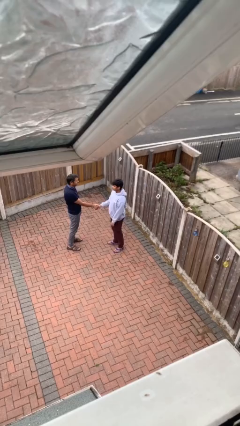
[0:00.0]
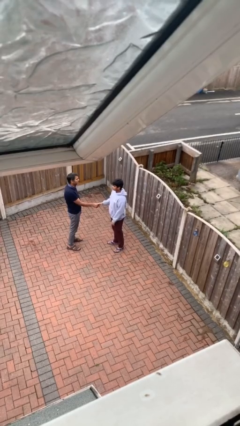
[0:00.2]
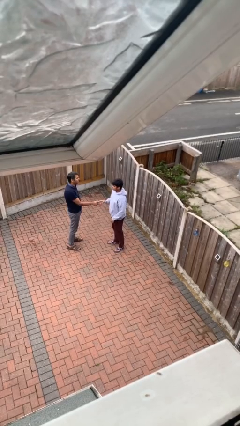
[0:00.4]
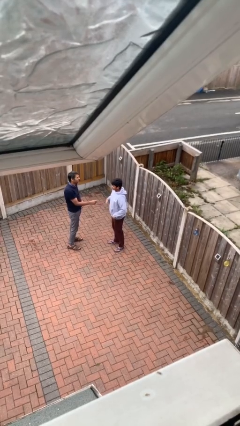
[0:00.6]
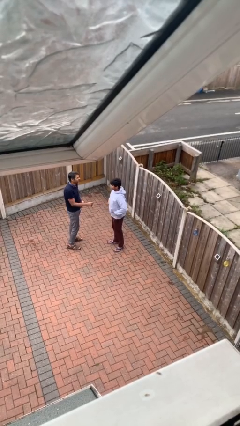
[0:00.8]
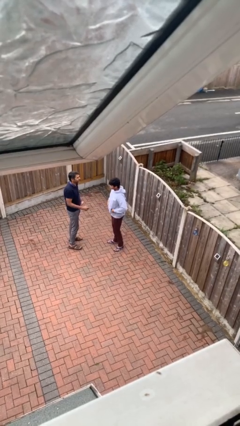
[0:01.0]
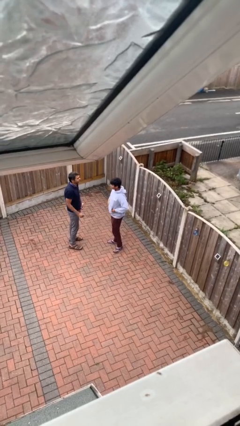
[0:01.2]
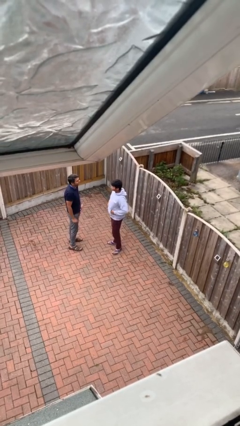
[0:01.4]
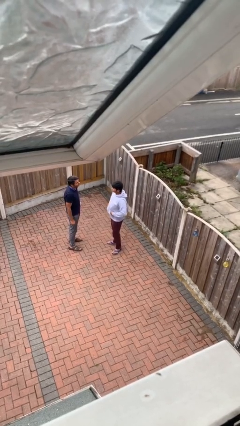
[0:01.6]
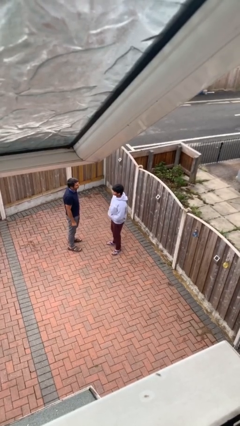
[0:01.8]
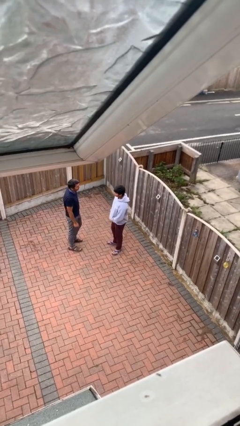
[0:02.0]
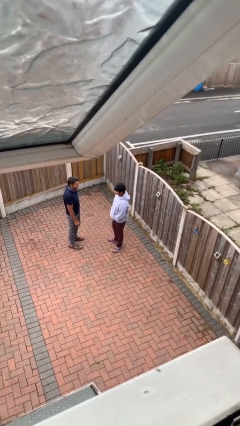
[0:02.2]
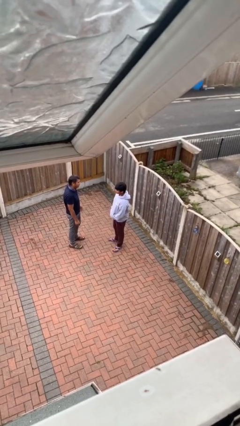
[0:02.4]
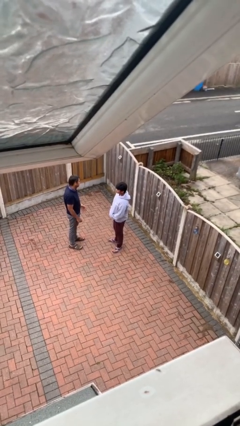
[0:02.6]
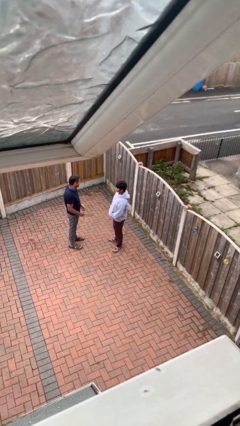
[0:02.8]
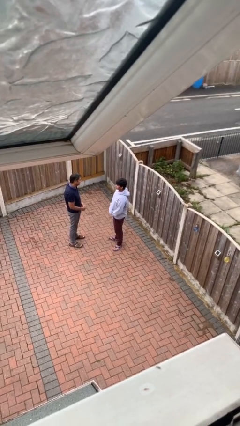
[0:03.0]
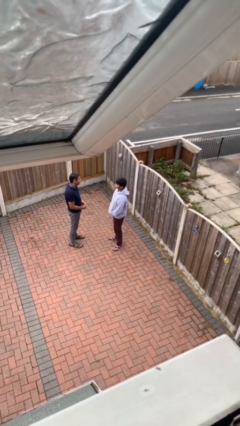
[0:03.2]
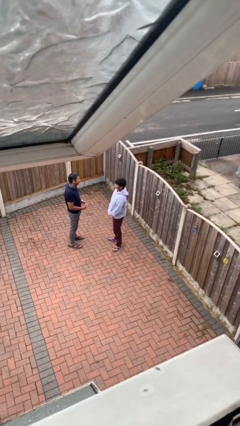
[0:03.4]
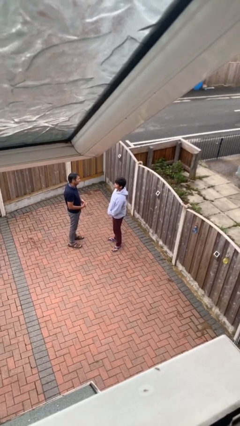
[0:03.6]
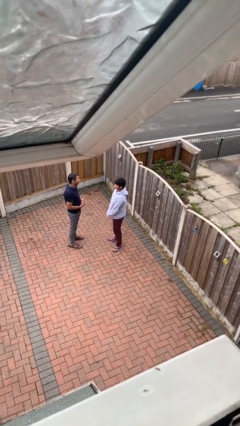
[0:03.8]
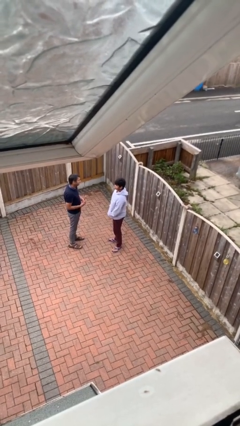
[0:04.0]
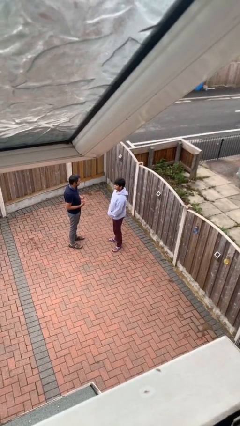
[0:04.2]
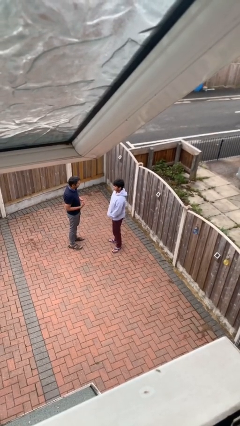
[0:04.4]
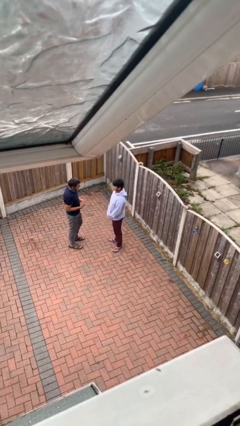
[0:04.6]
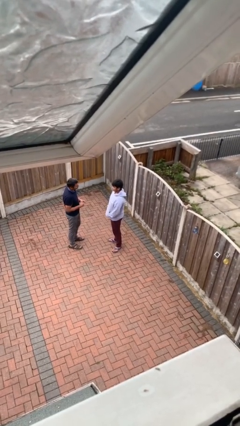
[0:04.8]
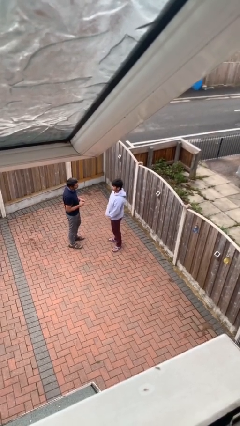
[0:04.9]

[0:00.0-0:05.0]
person talks to person

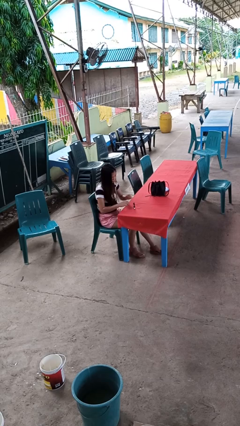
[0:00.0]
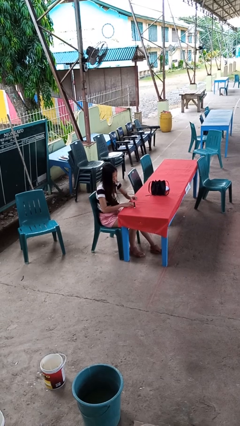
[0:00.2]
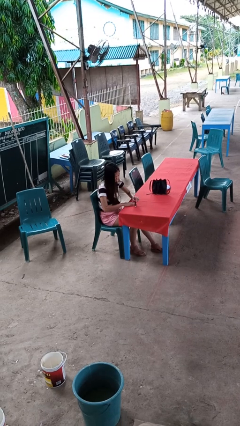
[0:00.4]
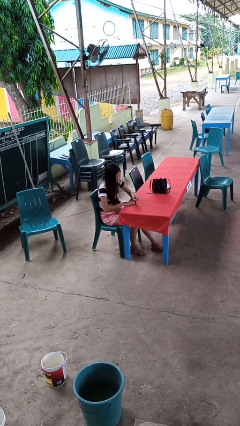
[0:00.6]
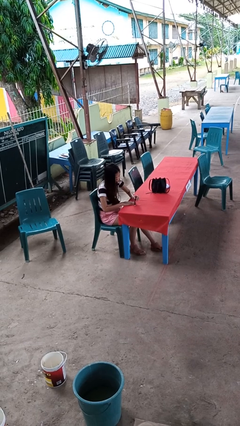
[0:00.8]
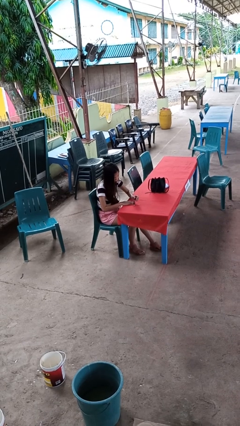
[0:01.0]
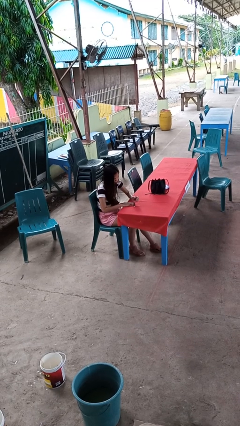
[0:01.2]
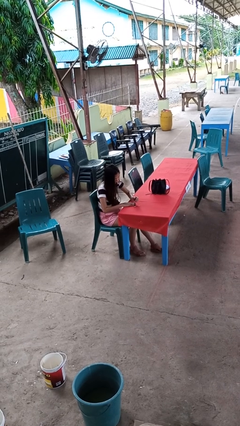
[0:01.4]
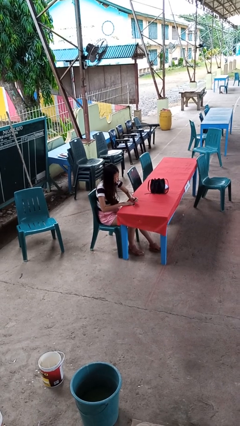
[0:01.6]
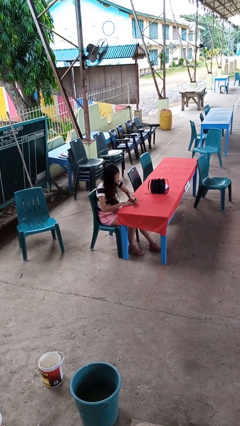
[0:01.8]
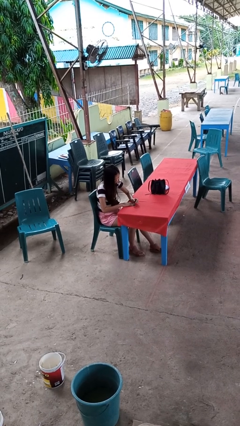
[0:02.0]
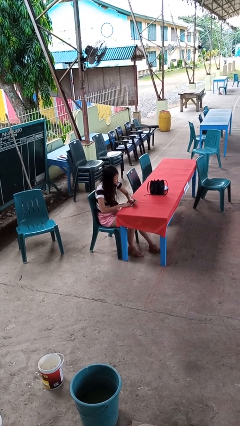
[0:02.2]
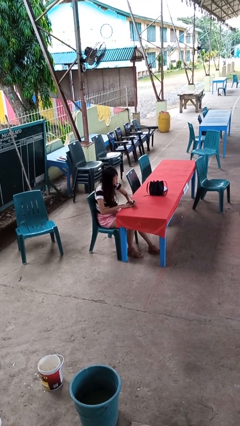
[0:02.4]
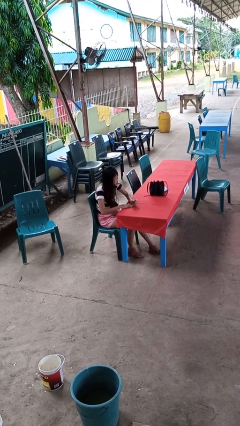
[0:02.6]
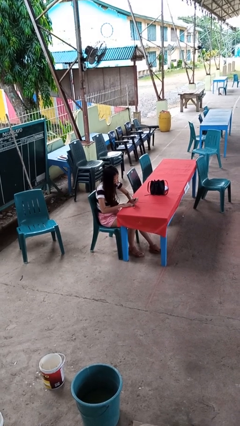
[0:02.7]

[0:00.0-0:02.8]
person paints fingernails

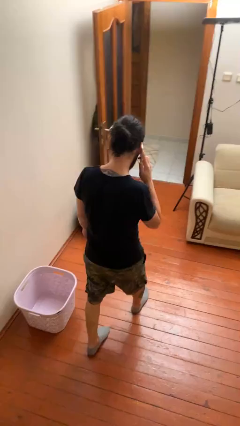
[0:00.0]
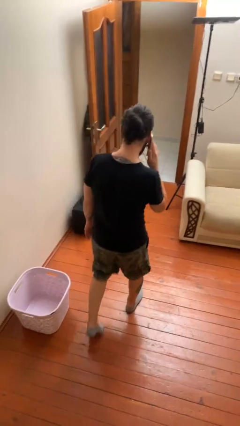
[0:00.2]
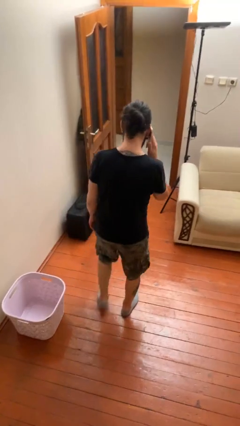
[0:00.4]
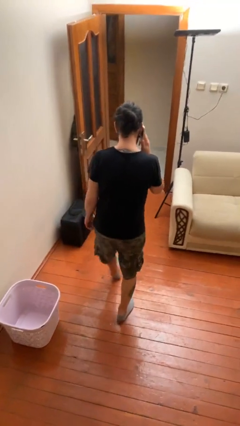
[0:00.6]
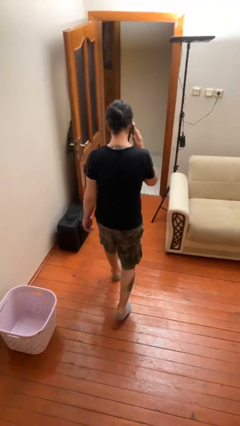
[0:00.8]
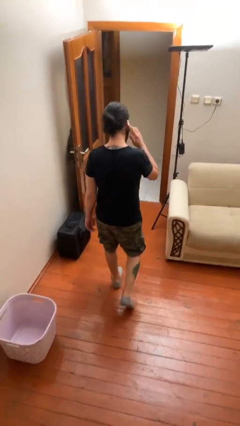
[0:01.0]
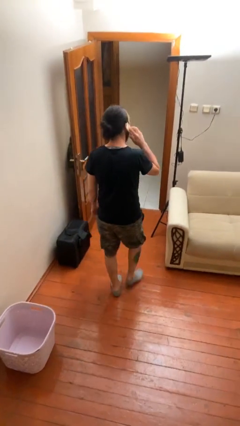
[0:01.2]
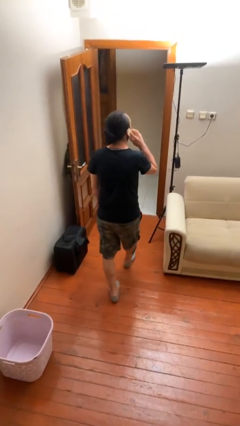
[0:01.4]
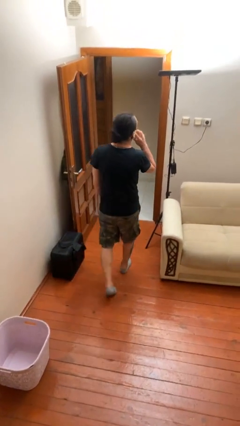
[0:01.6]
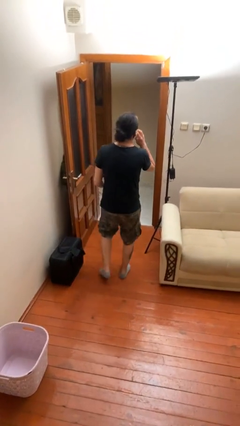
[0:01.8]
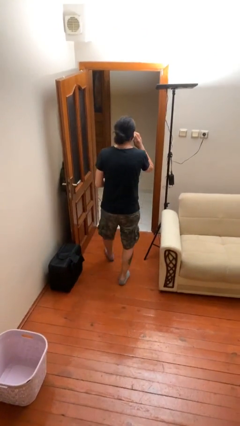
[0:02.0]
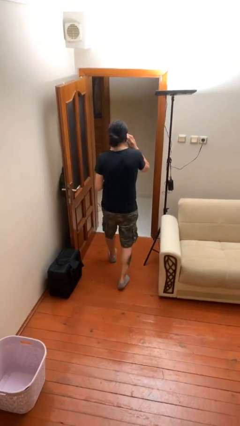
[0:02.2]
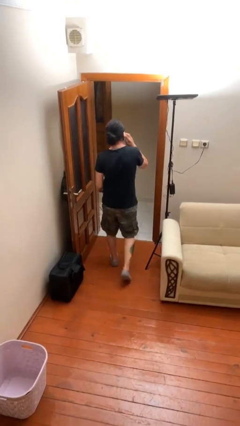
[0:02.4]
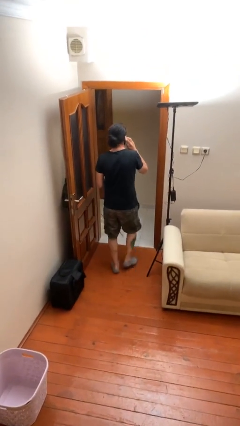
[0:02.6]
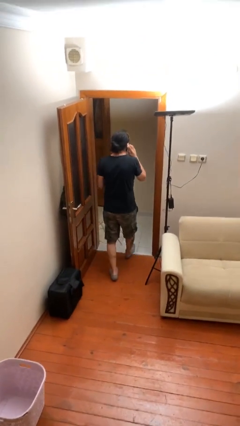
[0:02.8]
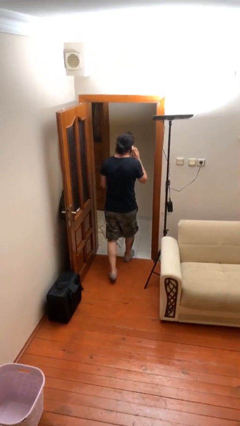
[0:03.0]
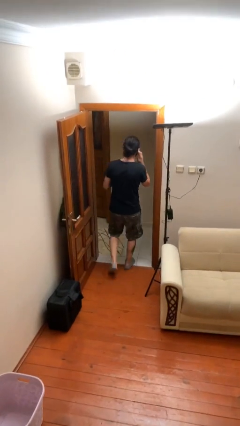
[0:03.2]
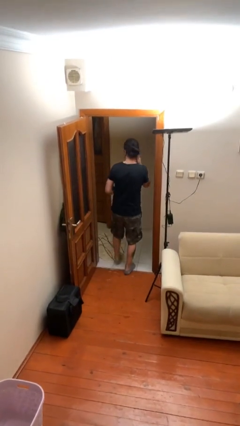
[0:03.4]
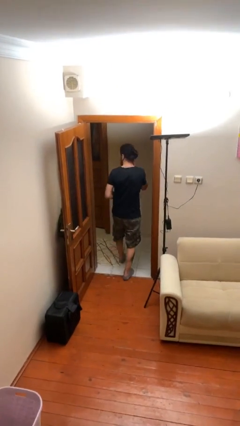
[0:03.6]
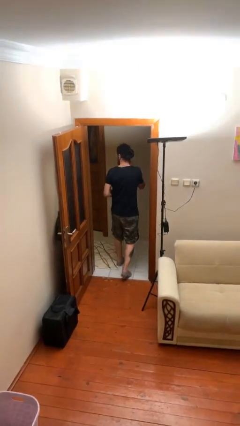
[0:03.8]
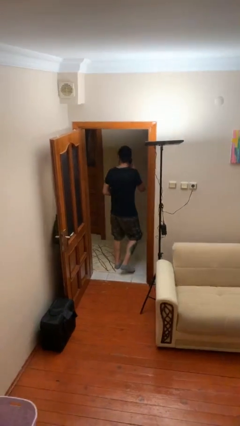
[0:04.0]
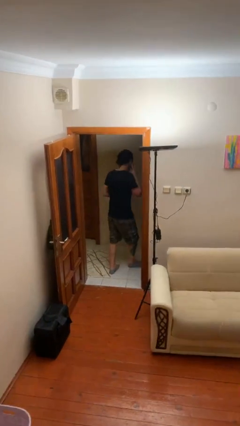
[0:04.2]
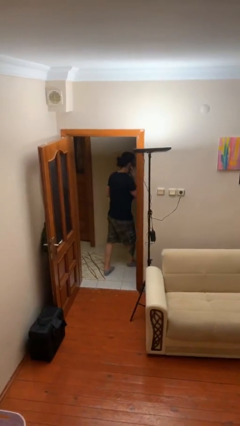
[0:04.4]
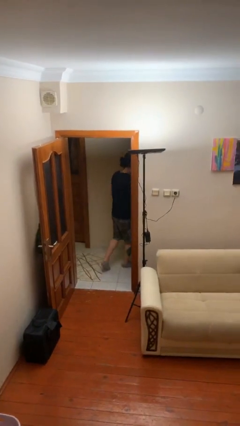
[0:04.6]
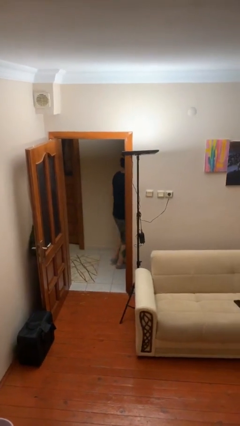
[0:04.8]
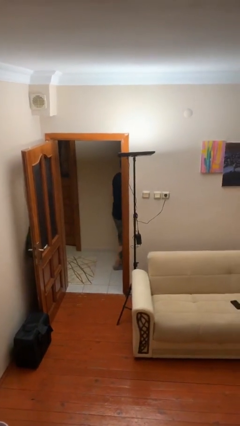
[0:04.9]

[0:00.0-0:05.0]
person exits scene through structure

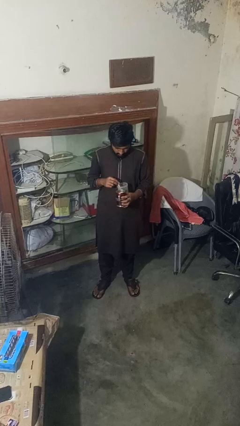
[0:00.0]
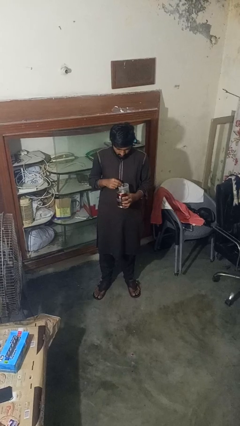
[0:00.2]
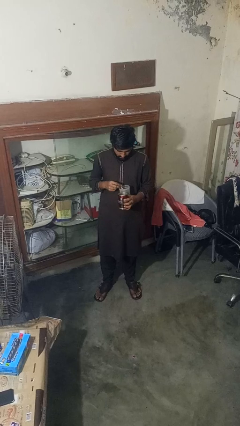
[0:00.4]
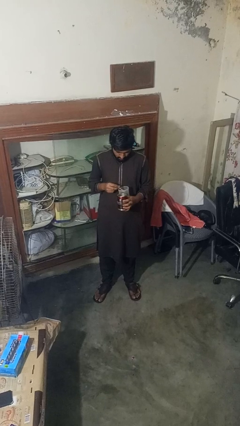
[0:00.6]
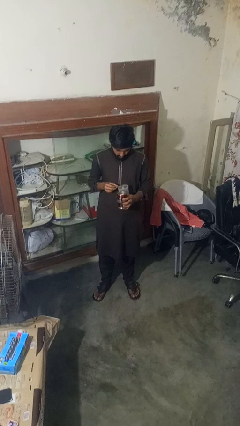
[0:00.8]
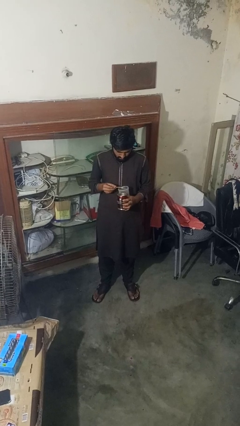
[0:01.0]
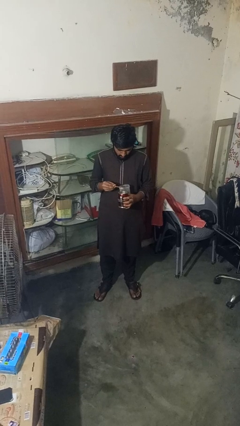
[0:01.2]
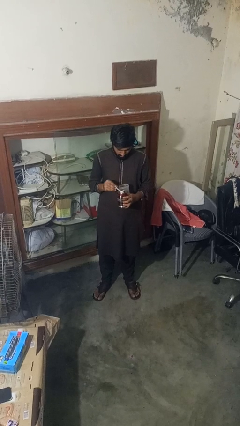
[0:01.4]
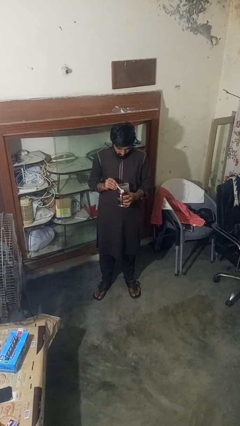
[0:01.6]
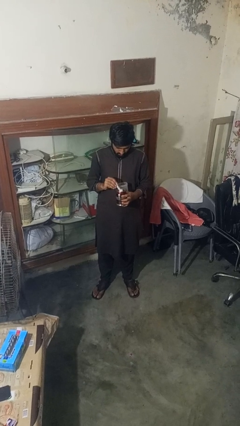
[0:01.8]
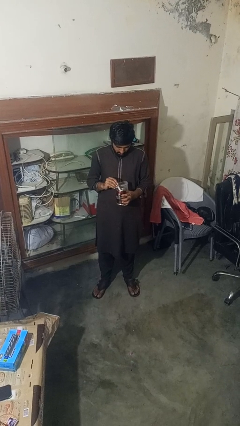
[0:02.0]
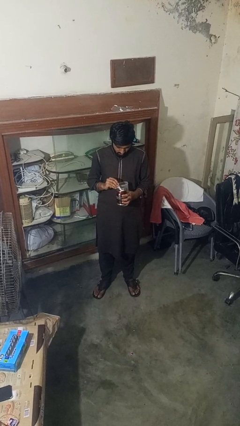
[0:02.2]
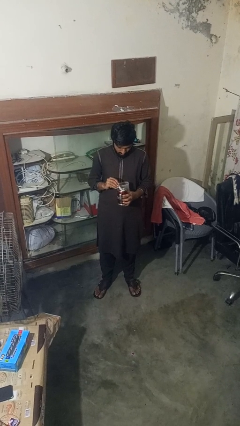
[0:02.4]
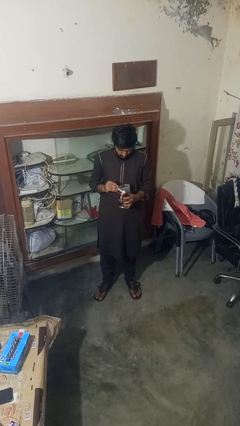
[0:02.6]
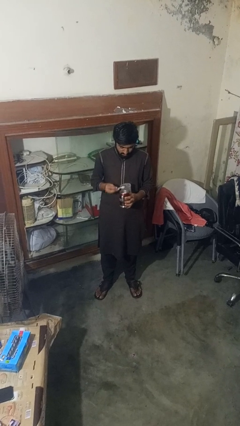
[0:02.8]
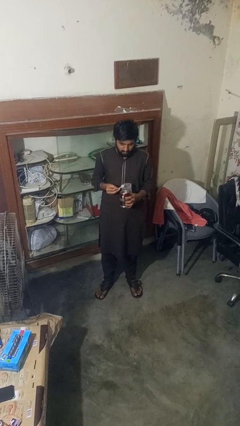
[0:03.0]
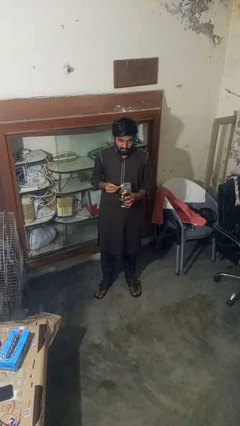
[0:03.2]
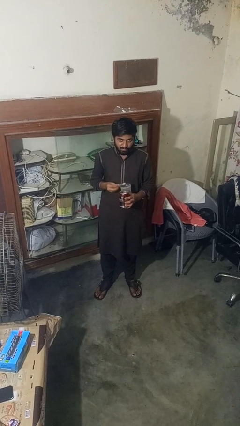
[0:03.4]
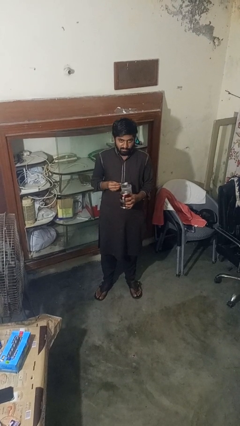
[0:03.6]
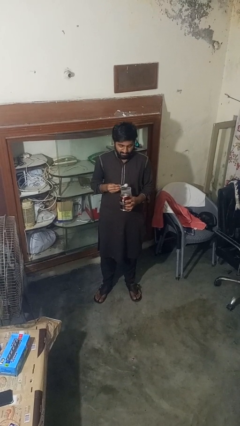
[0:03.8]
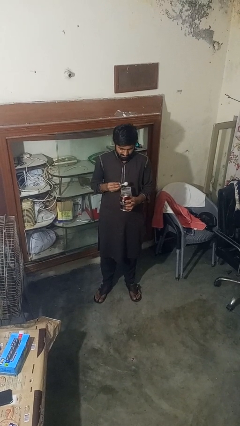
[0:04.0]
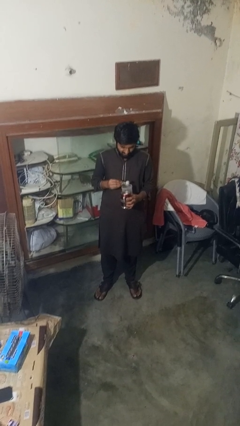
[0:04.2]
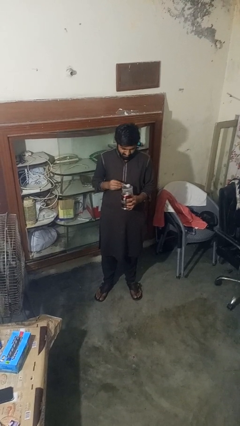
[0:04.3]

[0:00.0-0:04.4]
person pours coffee into mug

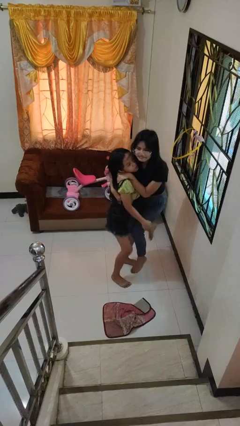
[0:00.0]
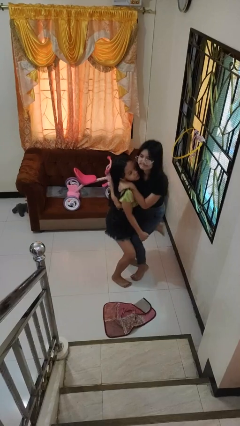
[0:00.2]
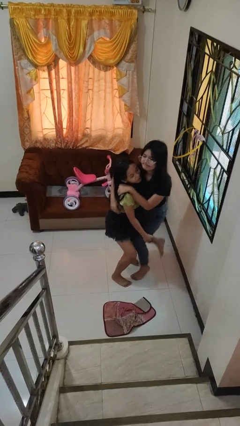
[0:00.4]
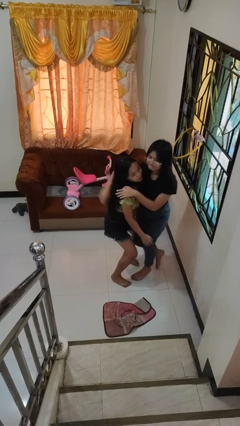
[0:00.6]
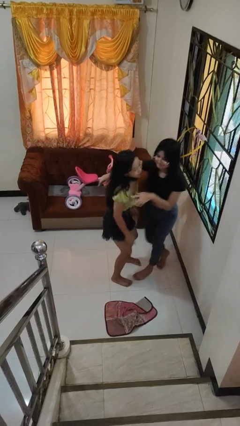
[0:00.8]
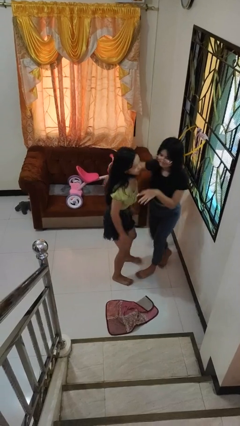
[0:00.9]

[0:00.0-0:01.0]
person puts down person
